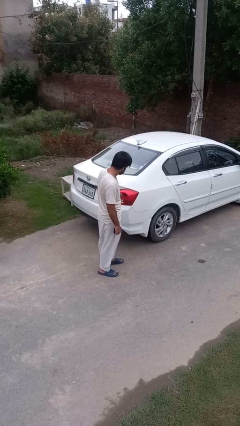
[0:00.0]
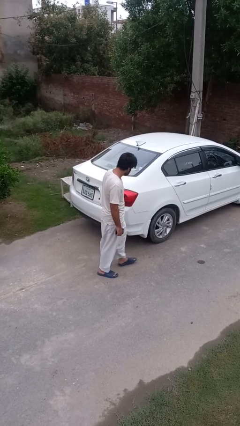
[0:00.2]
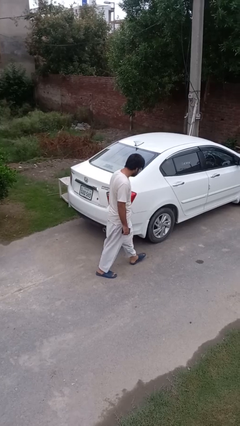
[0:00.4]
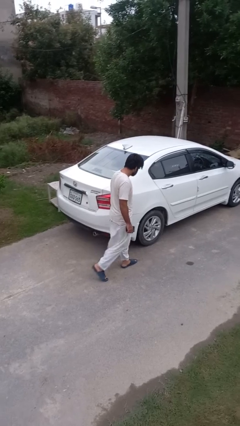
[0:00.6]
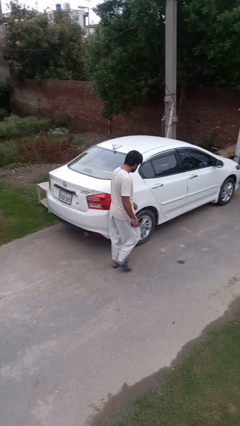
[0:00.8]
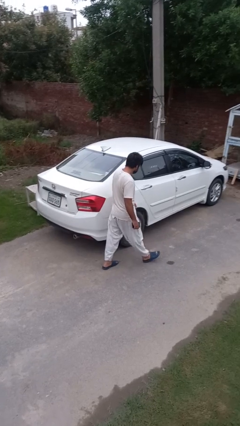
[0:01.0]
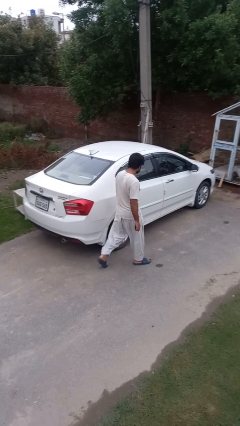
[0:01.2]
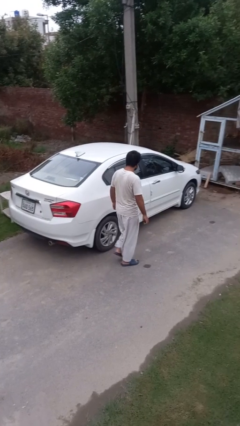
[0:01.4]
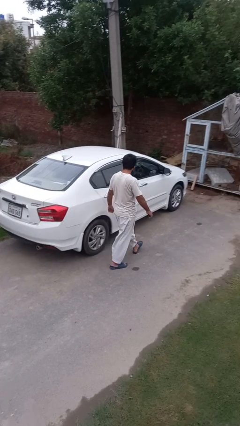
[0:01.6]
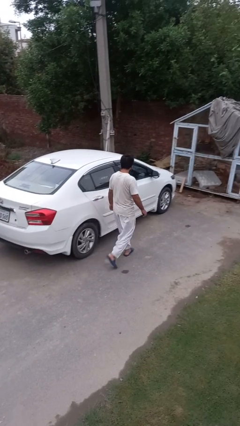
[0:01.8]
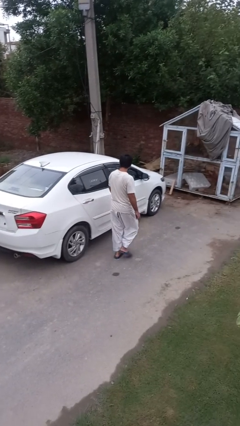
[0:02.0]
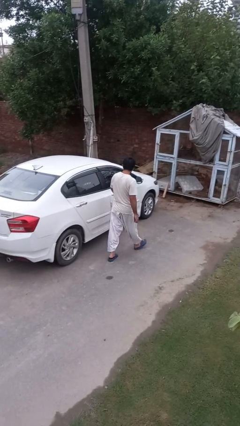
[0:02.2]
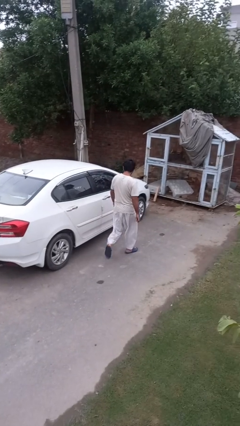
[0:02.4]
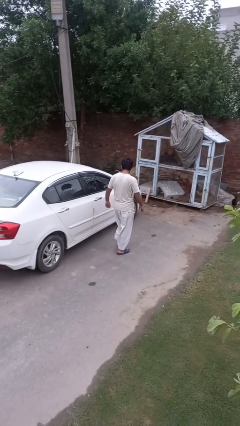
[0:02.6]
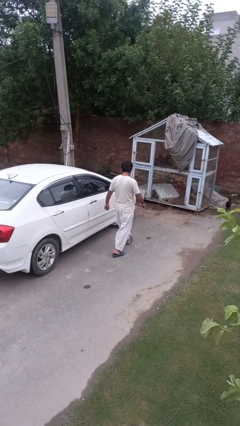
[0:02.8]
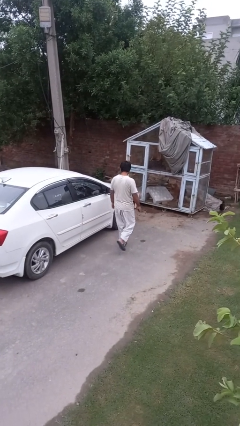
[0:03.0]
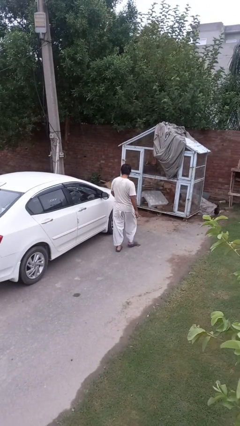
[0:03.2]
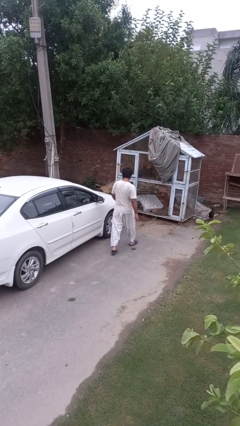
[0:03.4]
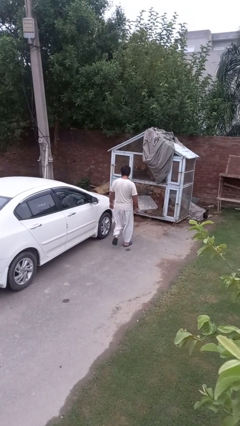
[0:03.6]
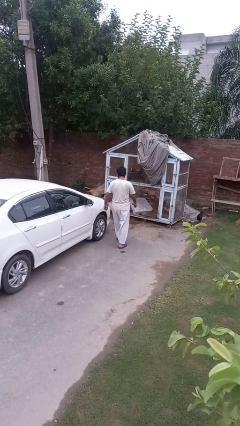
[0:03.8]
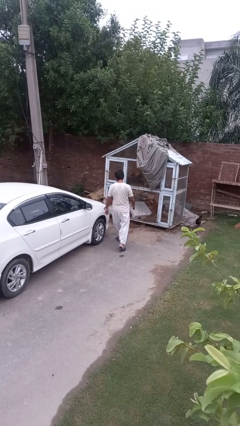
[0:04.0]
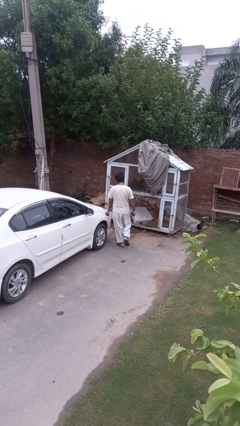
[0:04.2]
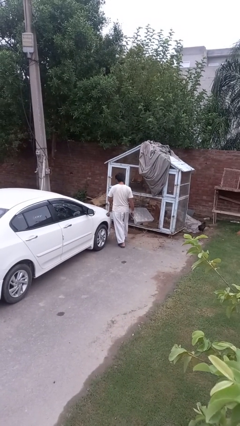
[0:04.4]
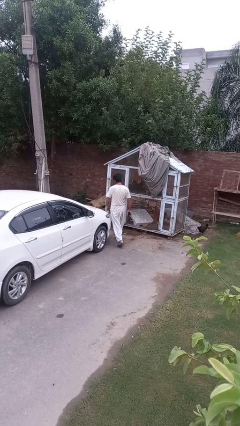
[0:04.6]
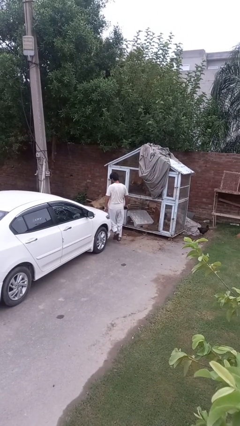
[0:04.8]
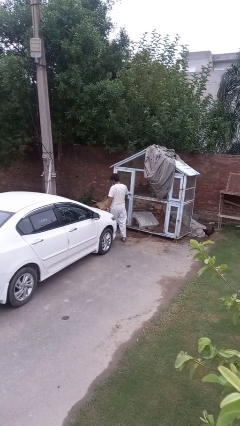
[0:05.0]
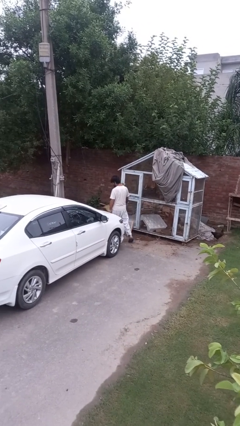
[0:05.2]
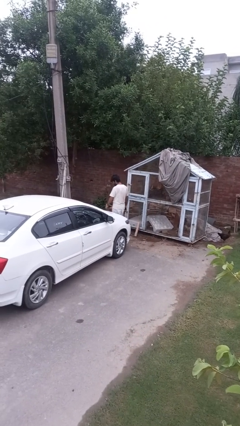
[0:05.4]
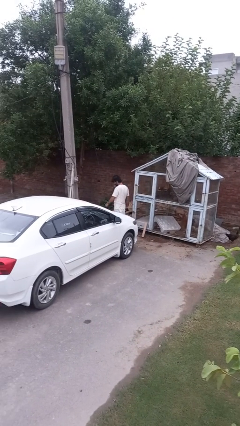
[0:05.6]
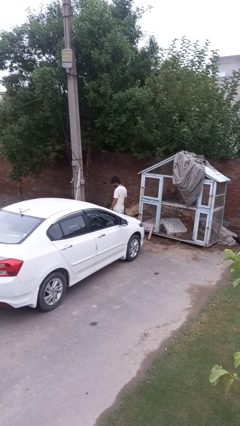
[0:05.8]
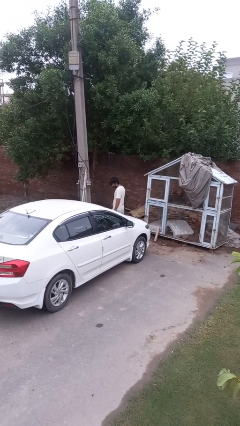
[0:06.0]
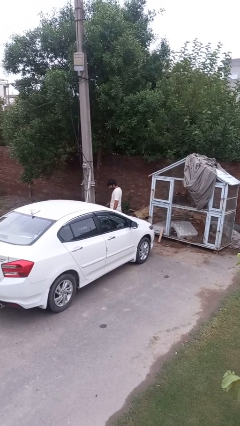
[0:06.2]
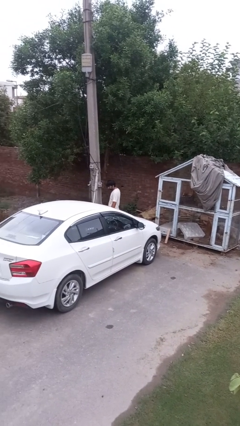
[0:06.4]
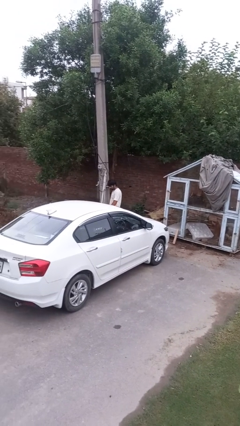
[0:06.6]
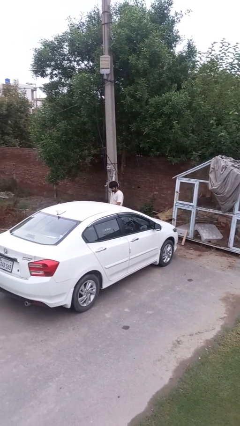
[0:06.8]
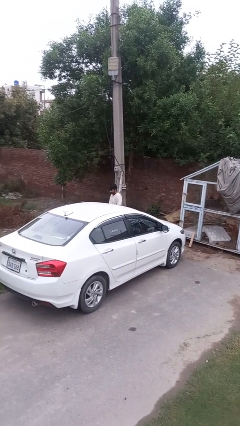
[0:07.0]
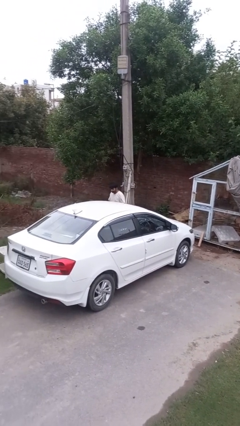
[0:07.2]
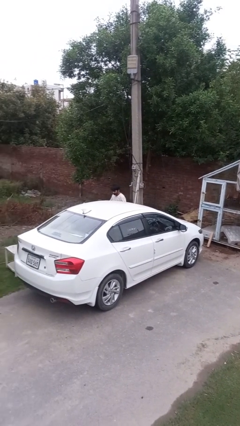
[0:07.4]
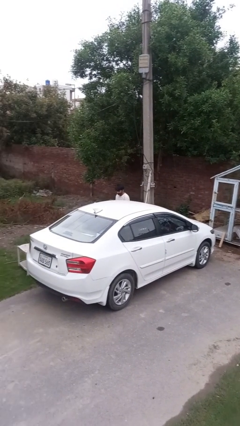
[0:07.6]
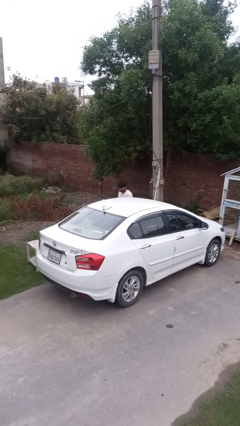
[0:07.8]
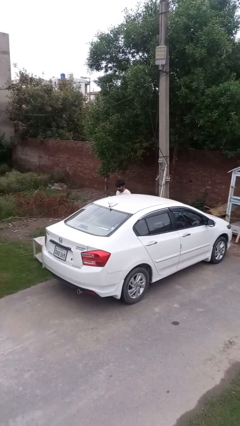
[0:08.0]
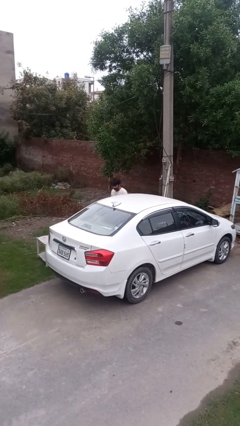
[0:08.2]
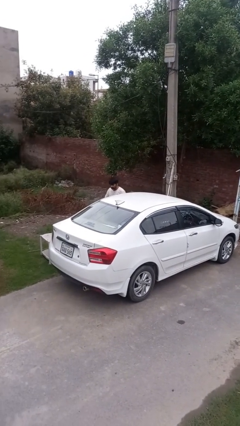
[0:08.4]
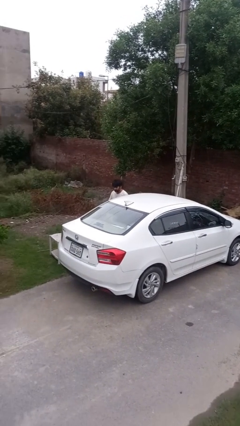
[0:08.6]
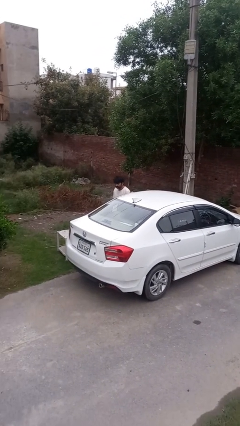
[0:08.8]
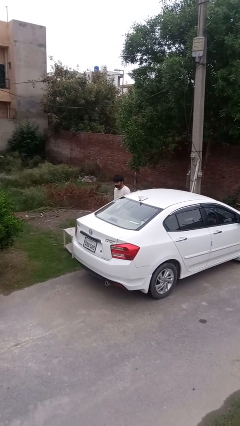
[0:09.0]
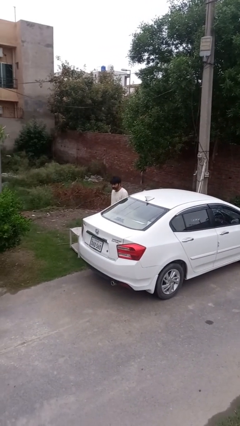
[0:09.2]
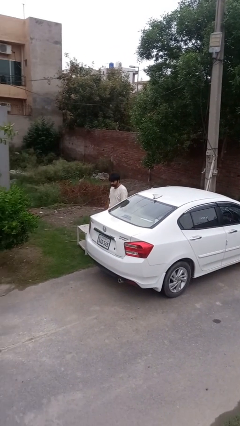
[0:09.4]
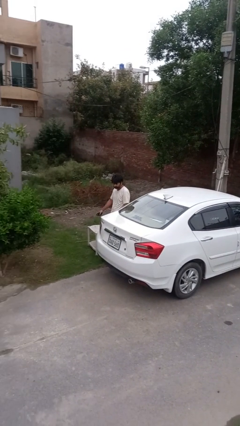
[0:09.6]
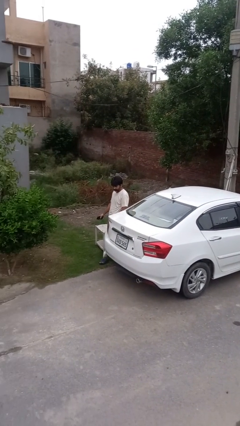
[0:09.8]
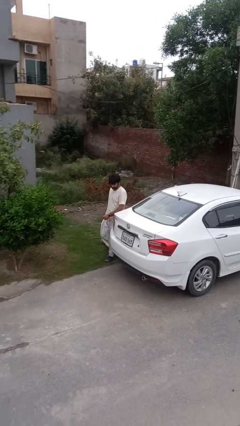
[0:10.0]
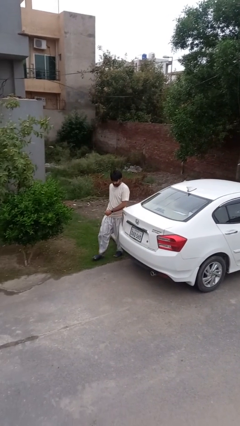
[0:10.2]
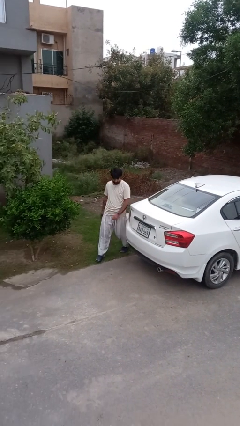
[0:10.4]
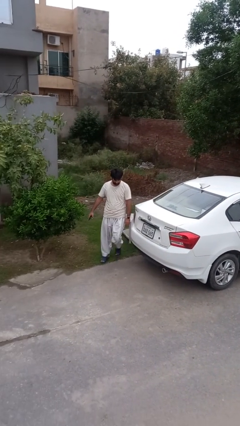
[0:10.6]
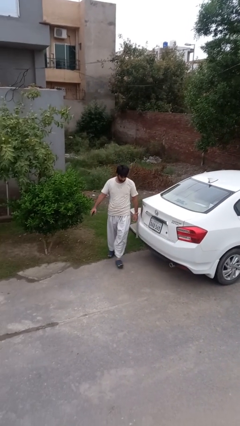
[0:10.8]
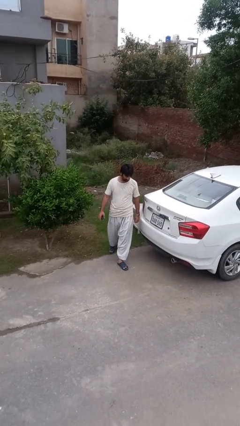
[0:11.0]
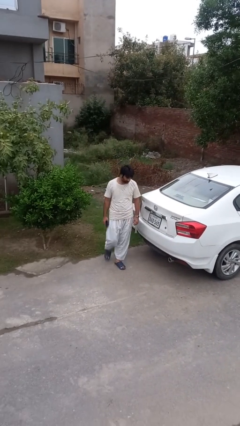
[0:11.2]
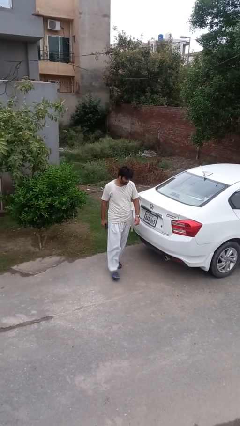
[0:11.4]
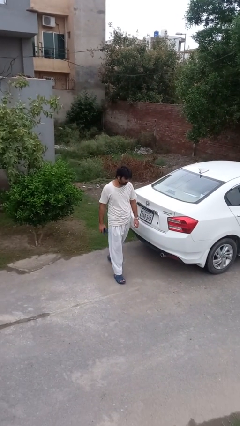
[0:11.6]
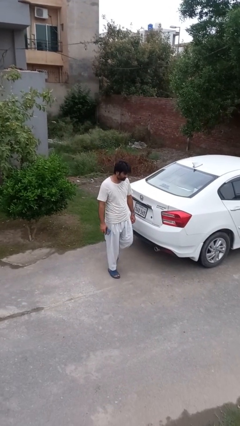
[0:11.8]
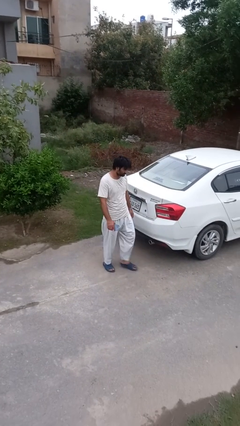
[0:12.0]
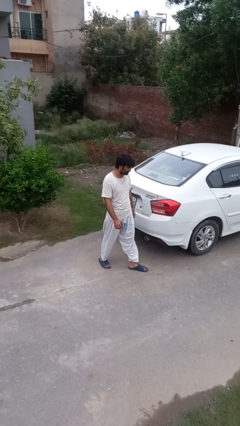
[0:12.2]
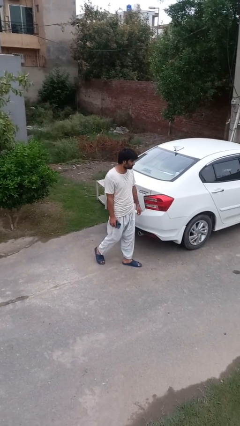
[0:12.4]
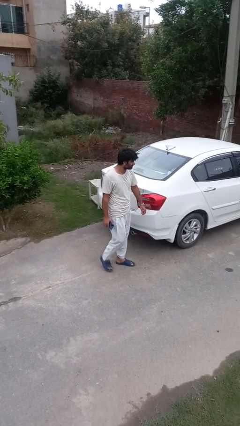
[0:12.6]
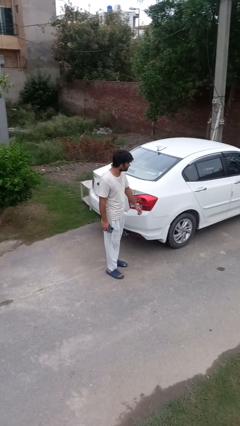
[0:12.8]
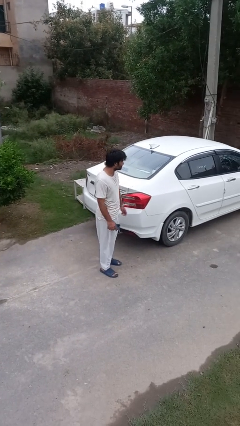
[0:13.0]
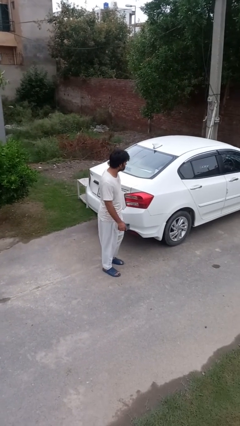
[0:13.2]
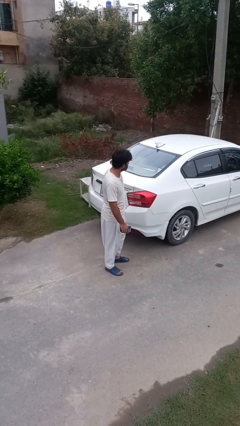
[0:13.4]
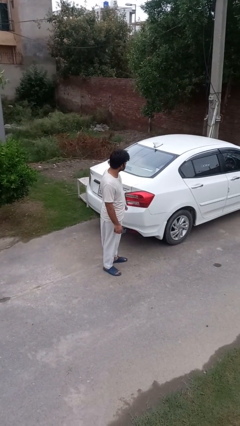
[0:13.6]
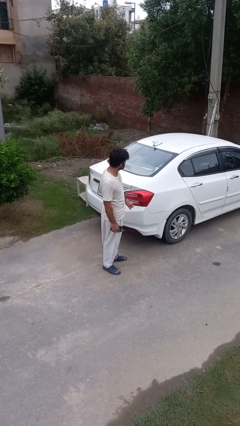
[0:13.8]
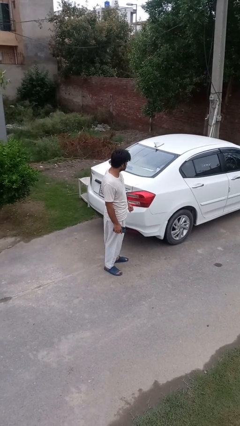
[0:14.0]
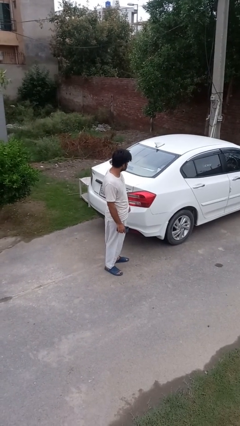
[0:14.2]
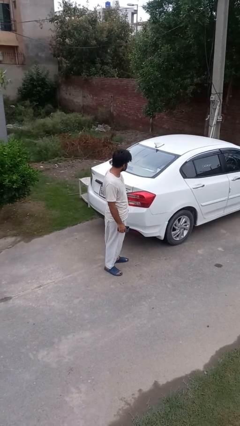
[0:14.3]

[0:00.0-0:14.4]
person walks around car

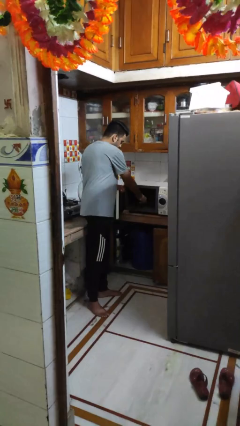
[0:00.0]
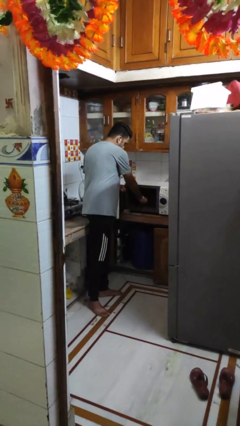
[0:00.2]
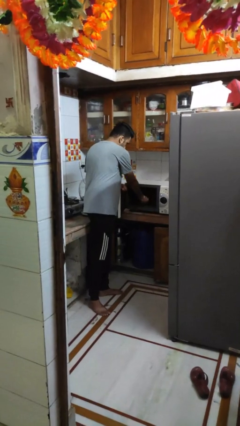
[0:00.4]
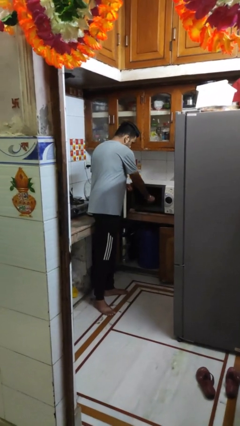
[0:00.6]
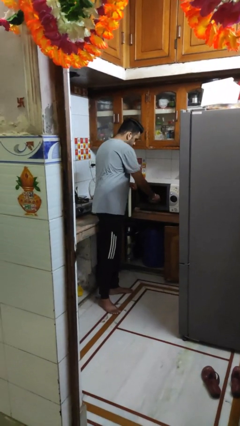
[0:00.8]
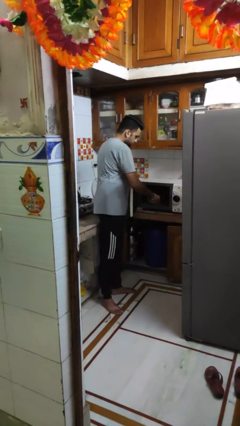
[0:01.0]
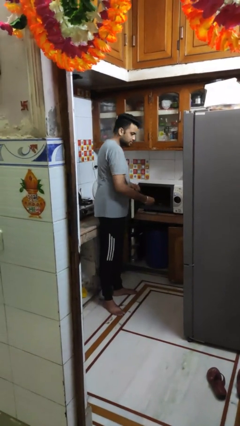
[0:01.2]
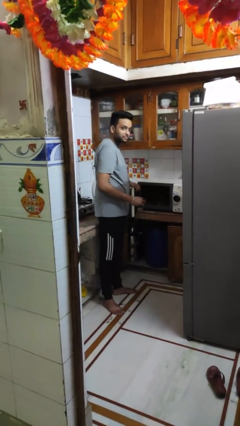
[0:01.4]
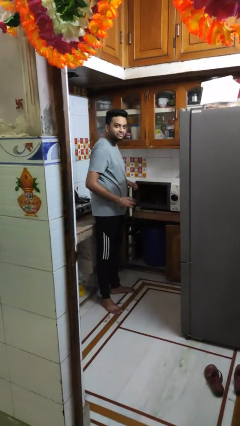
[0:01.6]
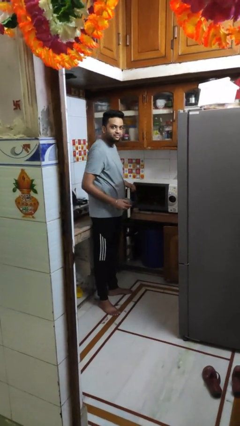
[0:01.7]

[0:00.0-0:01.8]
person takes object from microwave

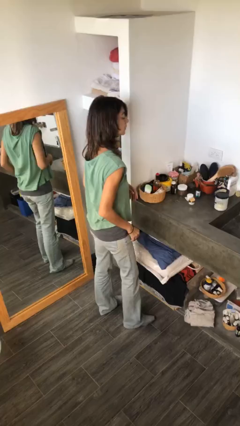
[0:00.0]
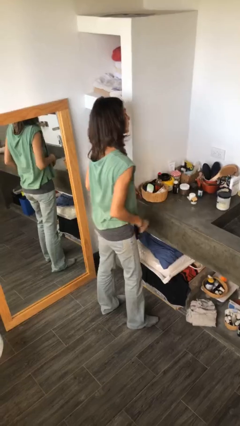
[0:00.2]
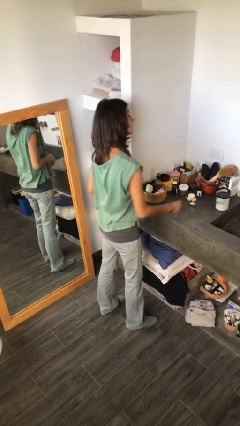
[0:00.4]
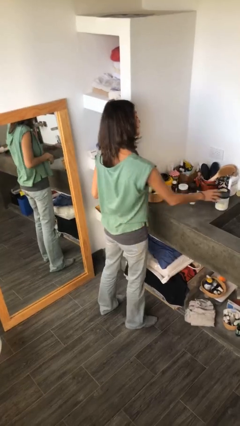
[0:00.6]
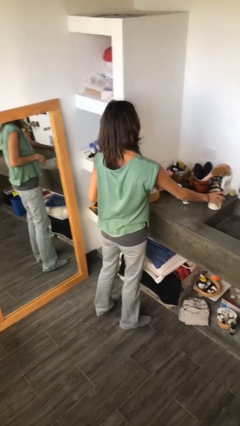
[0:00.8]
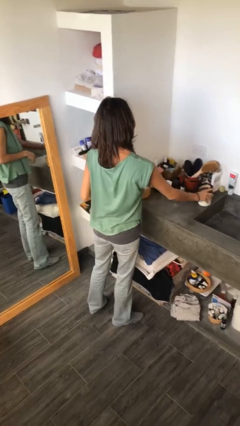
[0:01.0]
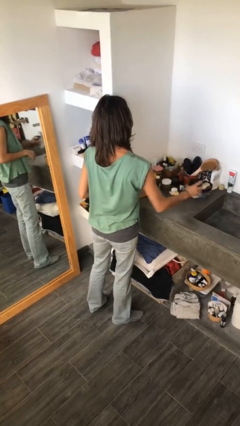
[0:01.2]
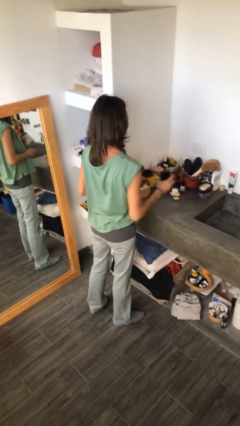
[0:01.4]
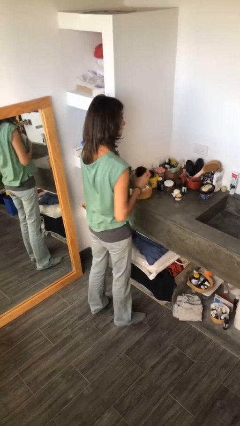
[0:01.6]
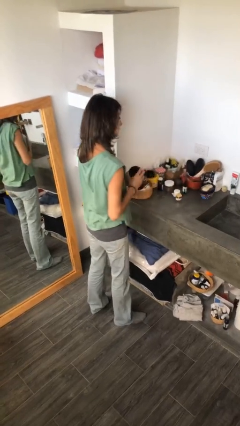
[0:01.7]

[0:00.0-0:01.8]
person picks up object from countertop
